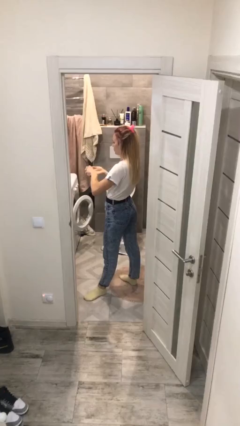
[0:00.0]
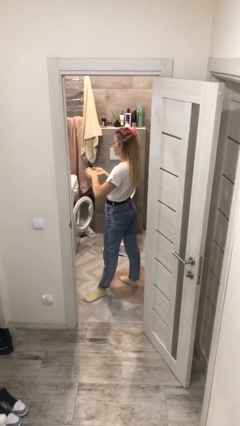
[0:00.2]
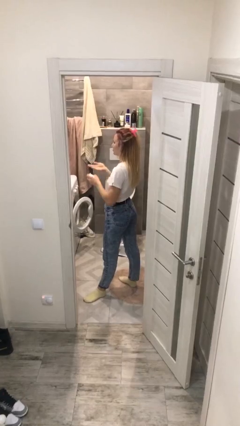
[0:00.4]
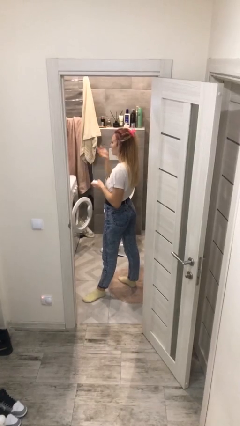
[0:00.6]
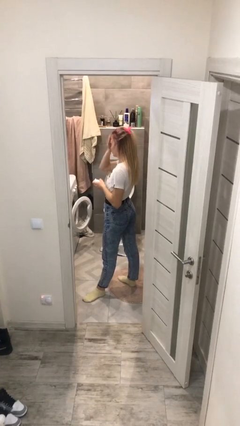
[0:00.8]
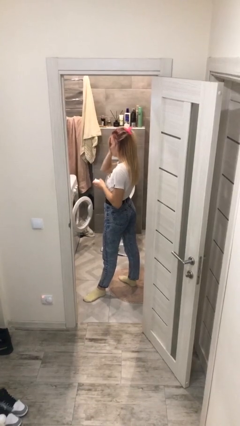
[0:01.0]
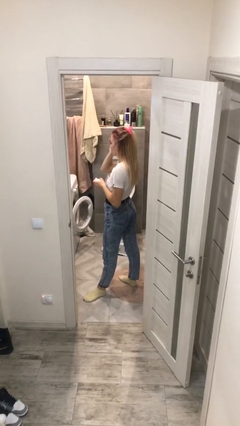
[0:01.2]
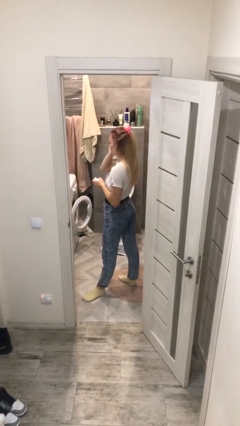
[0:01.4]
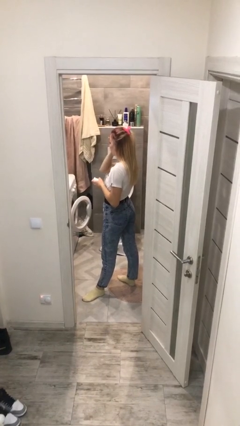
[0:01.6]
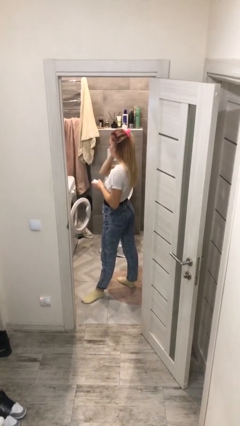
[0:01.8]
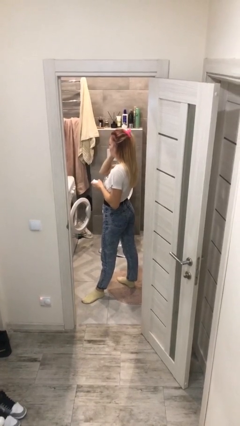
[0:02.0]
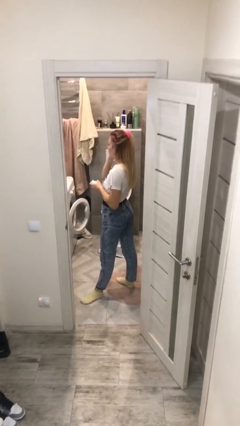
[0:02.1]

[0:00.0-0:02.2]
person applies facial moisturizer

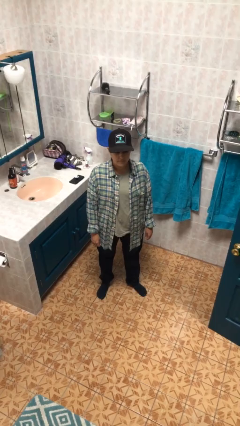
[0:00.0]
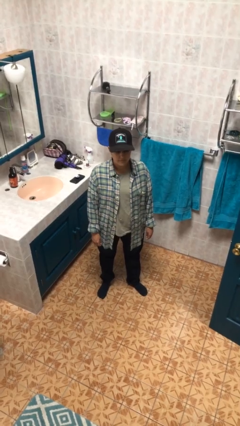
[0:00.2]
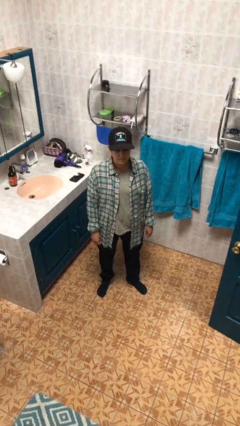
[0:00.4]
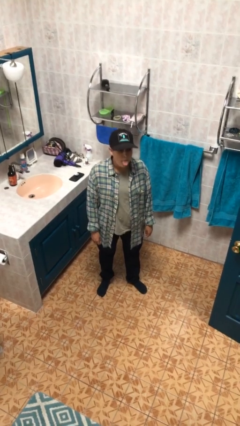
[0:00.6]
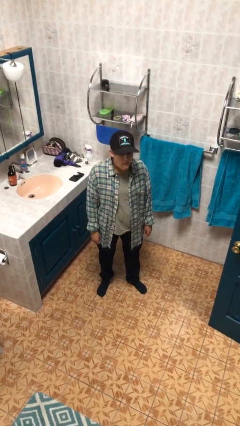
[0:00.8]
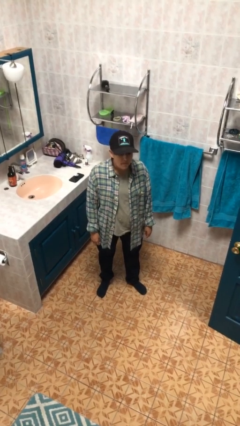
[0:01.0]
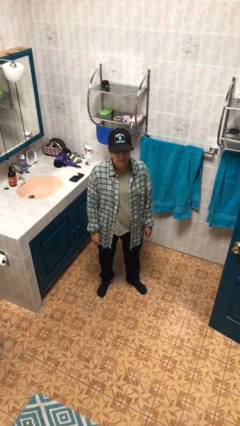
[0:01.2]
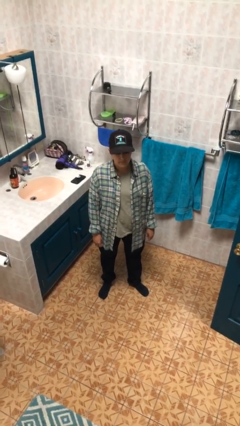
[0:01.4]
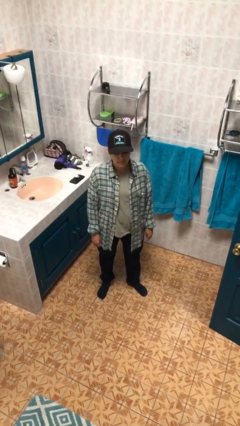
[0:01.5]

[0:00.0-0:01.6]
person sticks out tongue

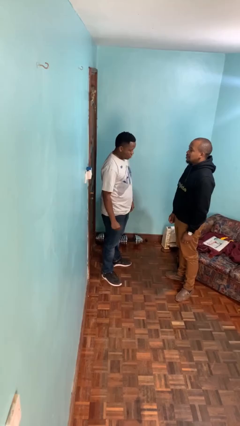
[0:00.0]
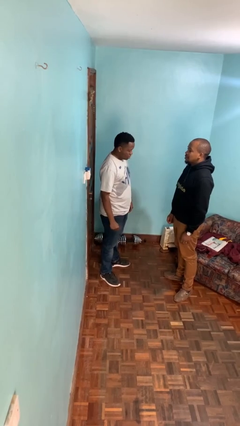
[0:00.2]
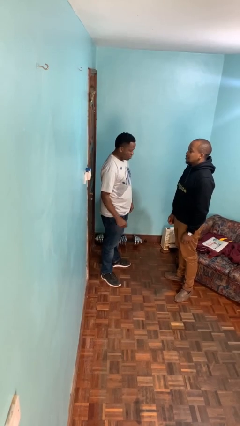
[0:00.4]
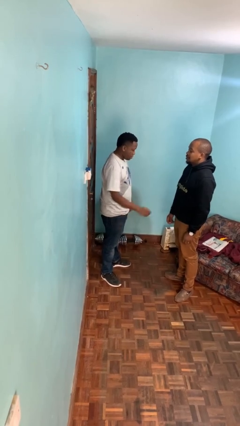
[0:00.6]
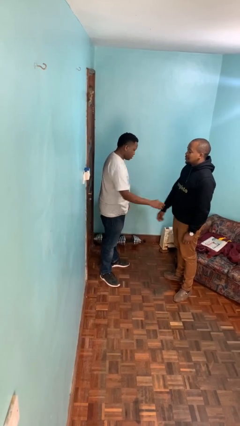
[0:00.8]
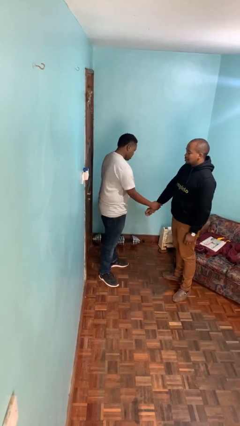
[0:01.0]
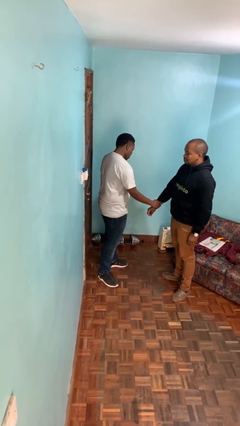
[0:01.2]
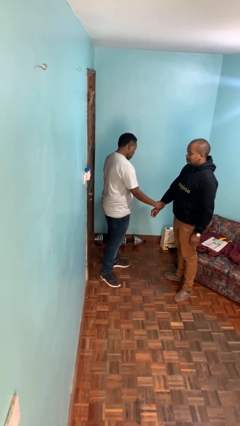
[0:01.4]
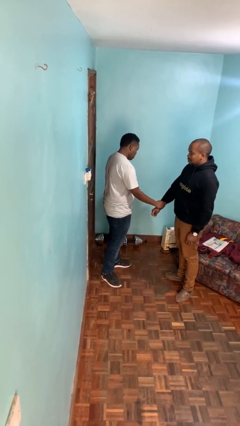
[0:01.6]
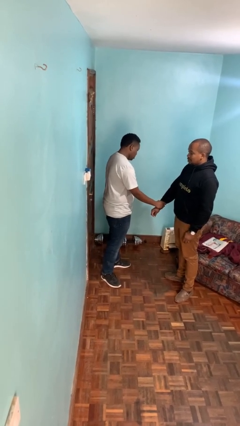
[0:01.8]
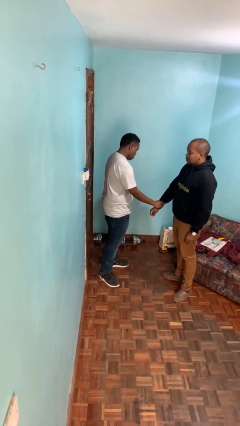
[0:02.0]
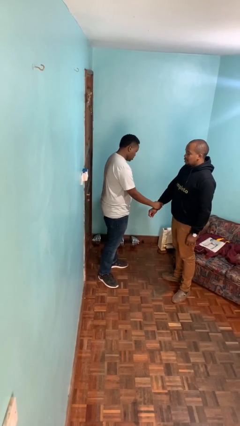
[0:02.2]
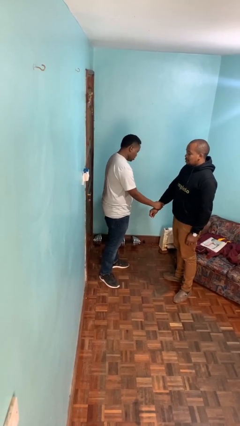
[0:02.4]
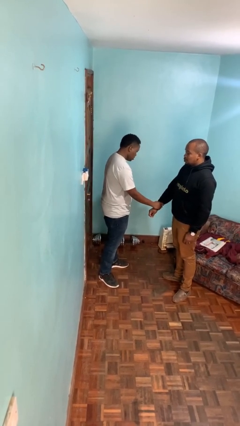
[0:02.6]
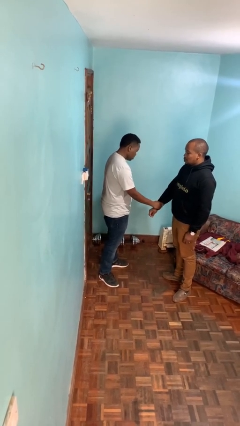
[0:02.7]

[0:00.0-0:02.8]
person grabs person by forearm

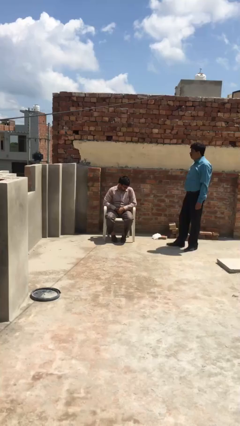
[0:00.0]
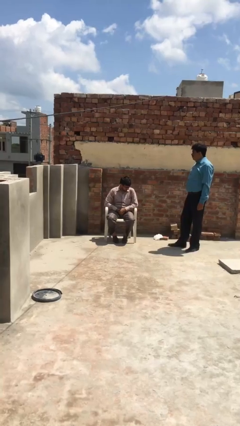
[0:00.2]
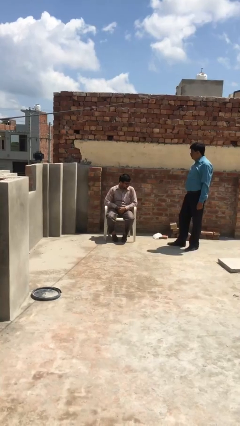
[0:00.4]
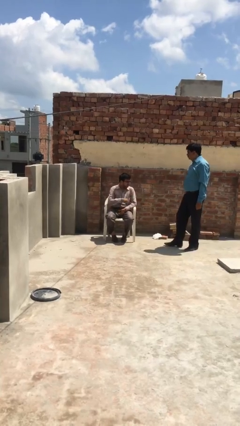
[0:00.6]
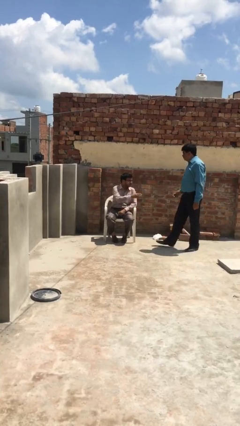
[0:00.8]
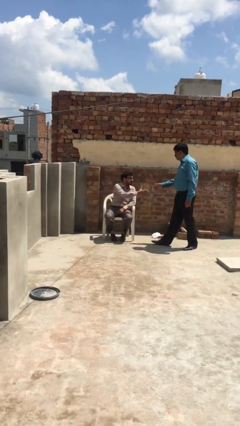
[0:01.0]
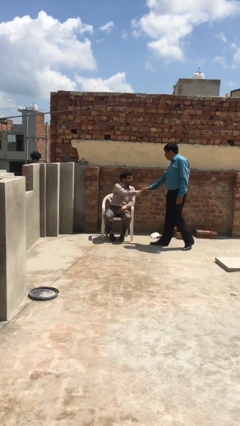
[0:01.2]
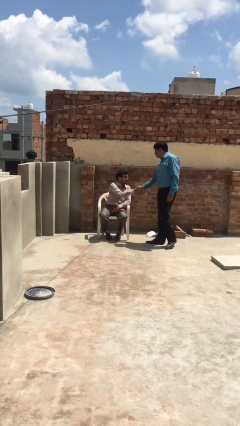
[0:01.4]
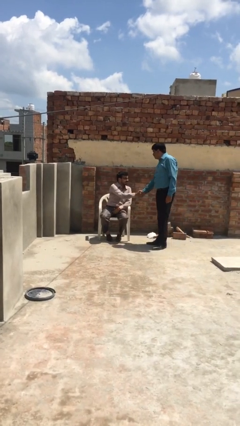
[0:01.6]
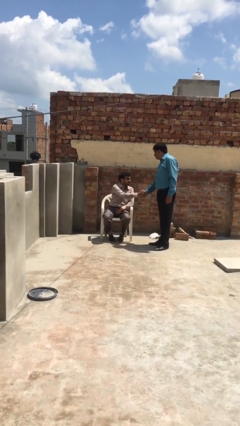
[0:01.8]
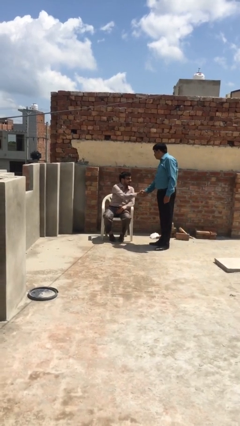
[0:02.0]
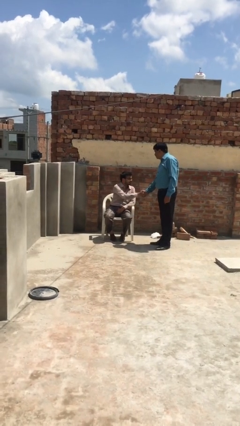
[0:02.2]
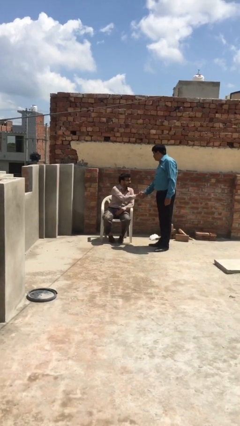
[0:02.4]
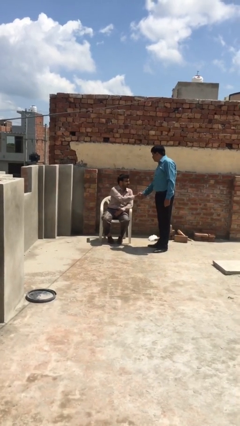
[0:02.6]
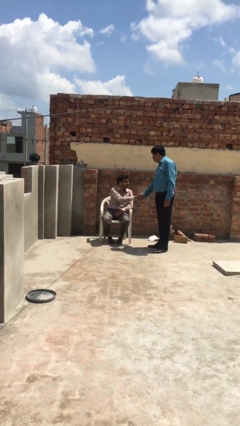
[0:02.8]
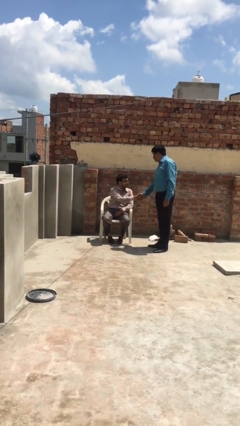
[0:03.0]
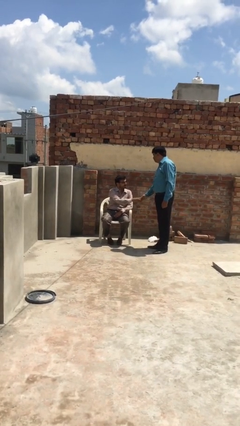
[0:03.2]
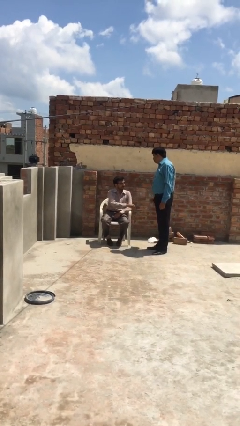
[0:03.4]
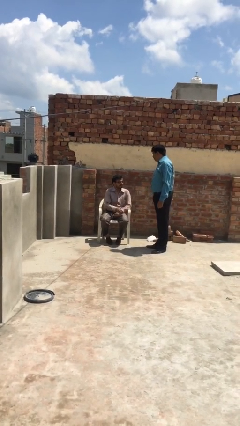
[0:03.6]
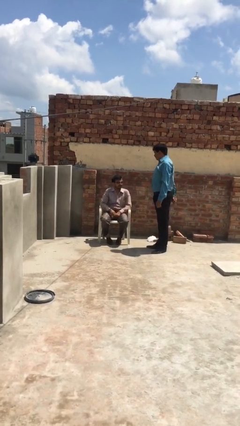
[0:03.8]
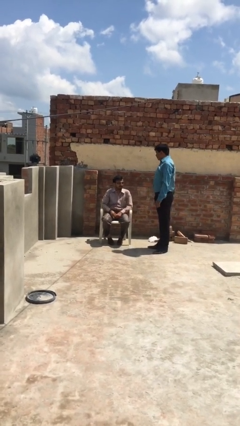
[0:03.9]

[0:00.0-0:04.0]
person shakes hand

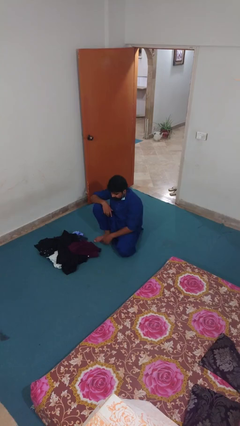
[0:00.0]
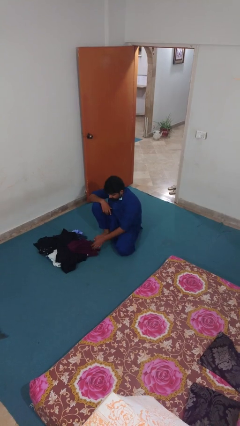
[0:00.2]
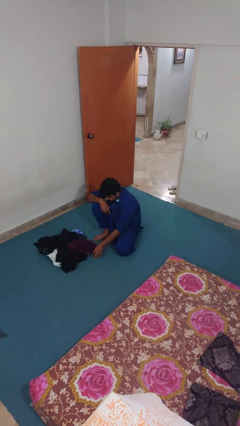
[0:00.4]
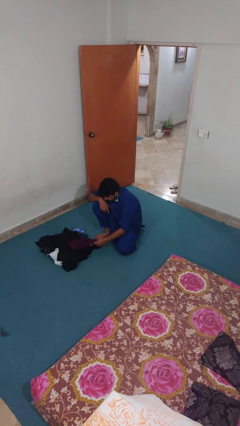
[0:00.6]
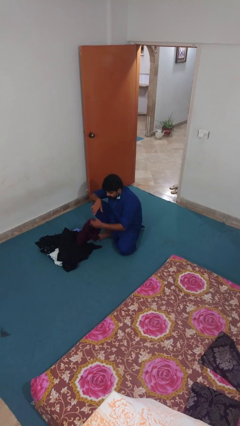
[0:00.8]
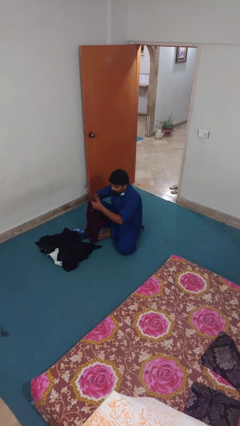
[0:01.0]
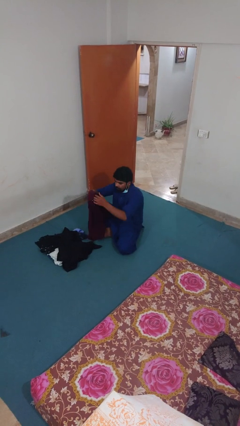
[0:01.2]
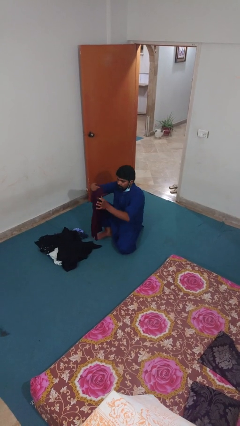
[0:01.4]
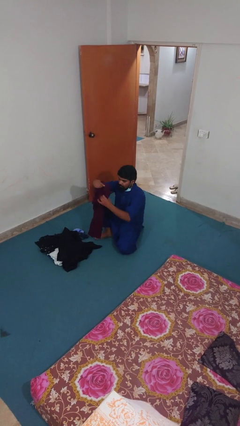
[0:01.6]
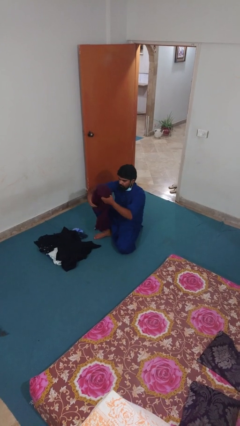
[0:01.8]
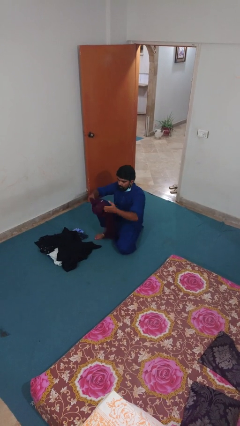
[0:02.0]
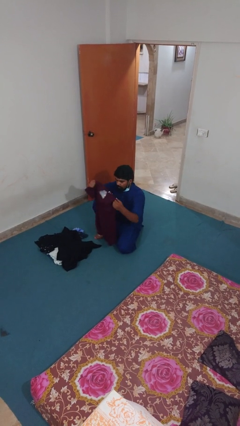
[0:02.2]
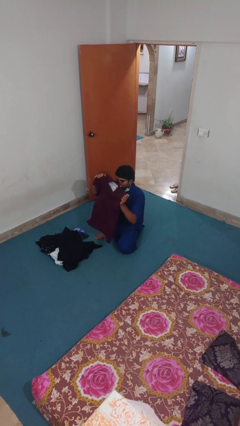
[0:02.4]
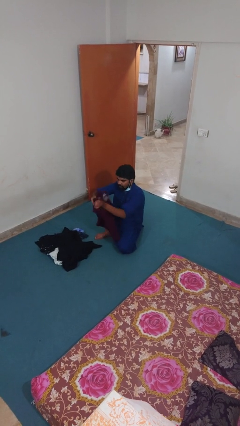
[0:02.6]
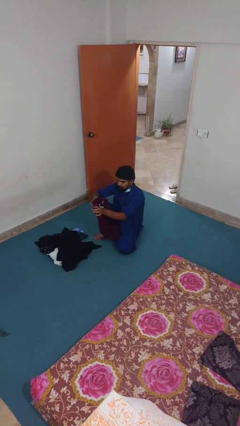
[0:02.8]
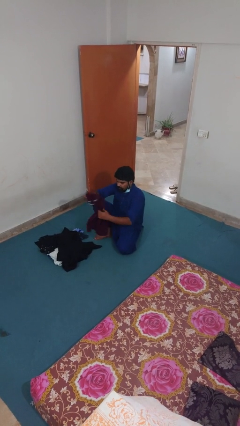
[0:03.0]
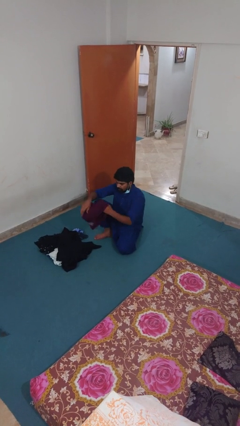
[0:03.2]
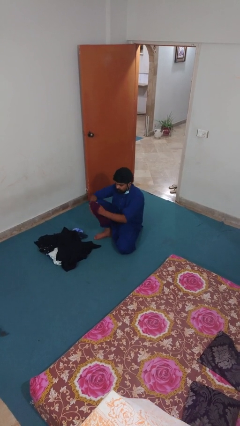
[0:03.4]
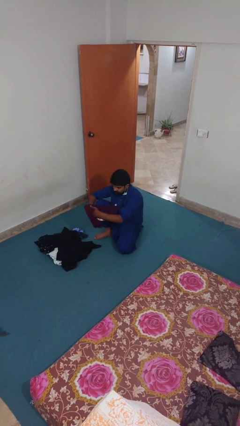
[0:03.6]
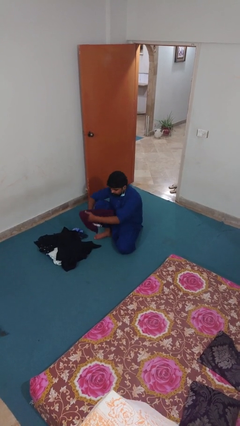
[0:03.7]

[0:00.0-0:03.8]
person folds shirt

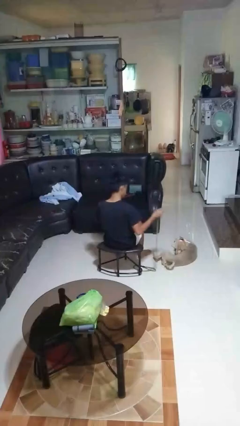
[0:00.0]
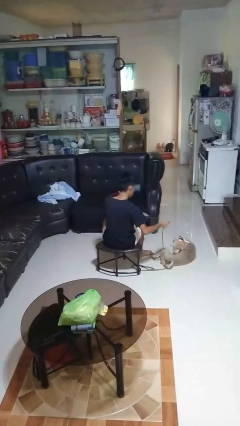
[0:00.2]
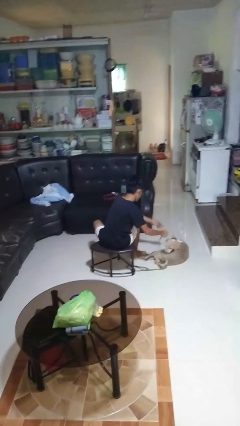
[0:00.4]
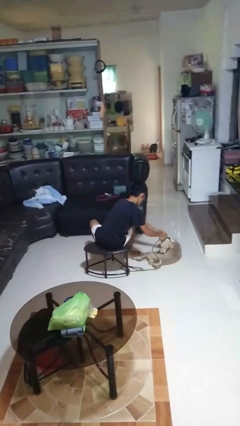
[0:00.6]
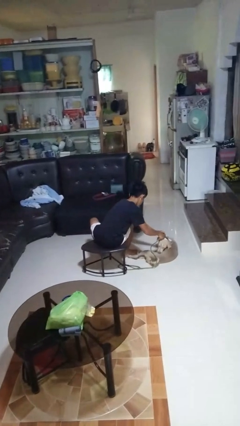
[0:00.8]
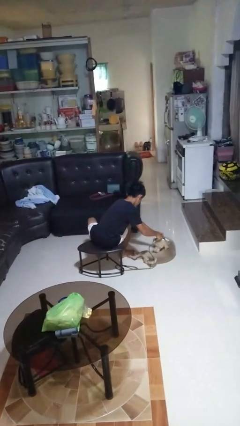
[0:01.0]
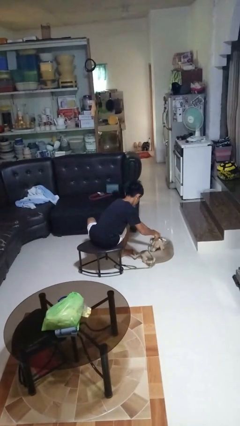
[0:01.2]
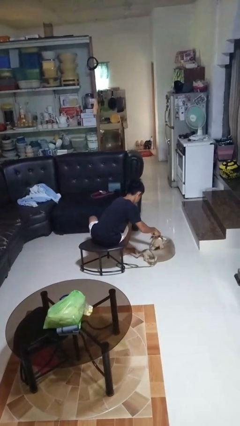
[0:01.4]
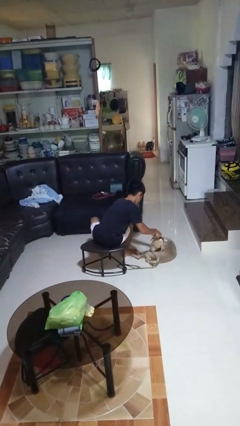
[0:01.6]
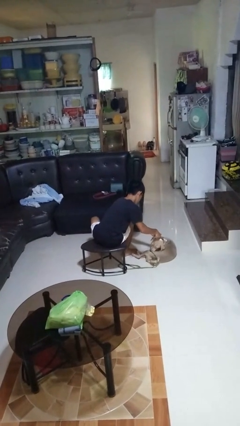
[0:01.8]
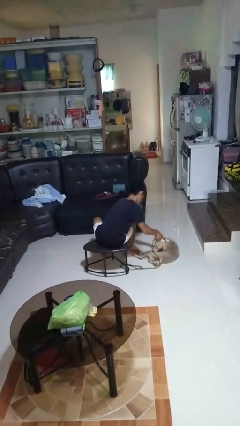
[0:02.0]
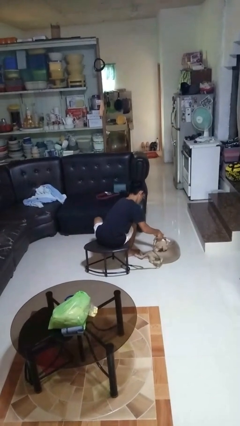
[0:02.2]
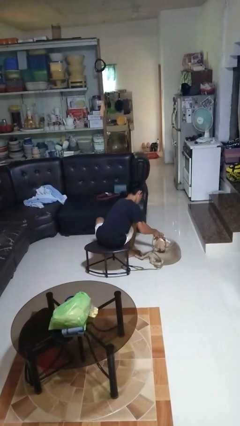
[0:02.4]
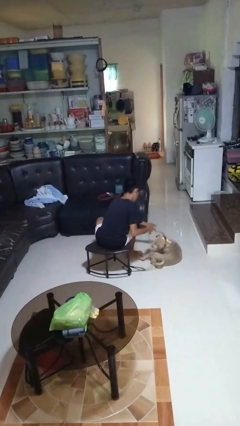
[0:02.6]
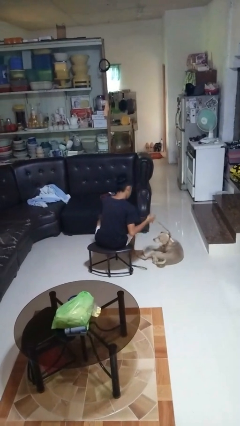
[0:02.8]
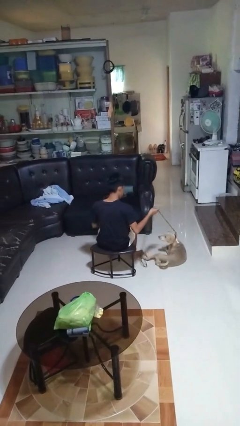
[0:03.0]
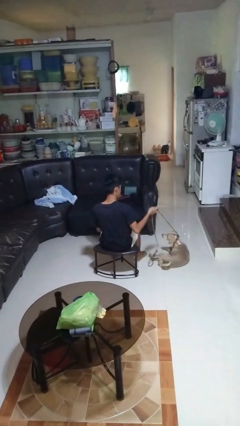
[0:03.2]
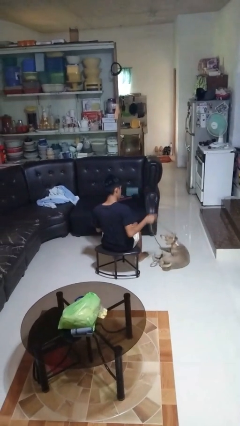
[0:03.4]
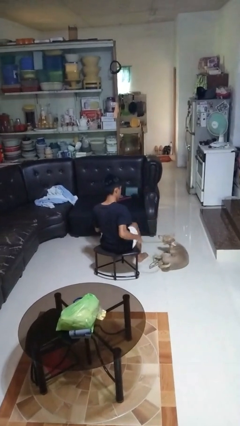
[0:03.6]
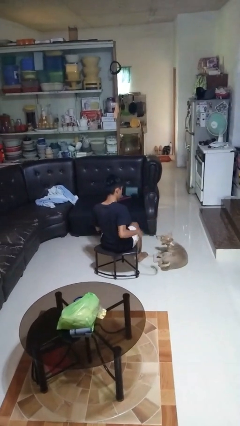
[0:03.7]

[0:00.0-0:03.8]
person attaches leash to dog
